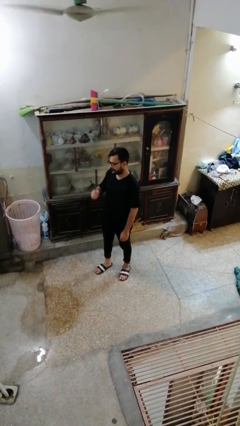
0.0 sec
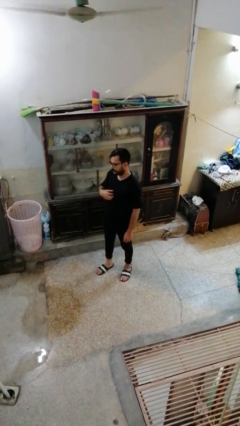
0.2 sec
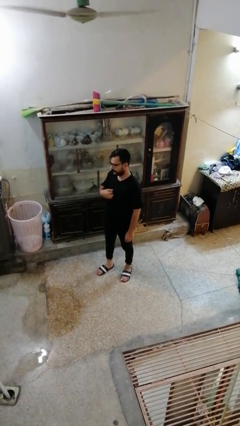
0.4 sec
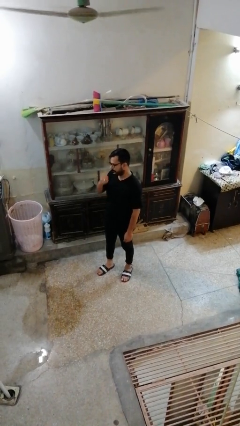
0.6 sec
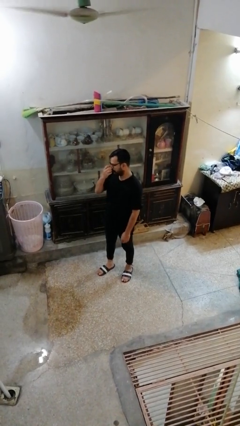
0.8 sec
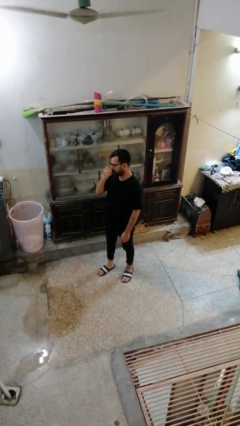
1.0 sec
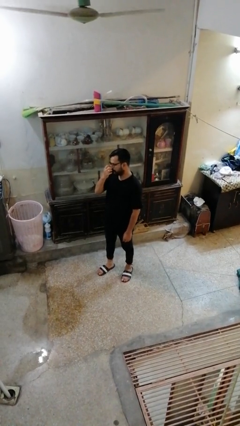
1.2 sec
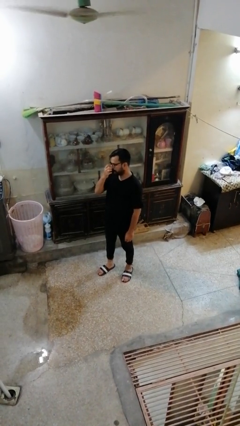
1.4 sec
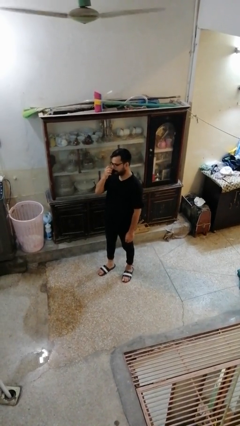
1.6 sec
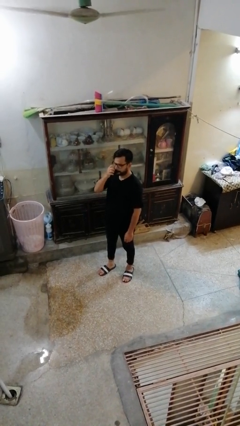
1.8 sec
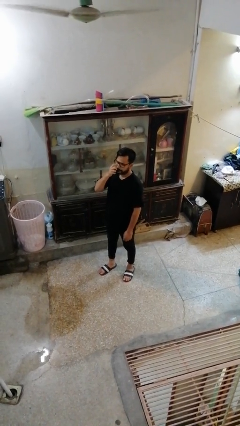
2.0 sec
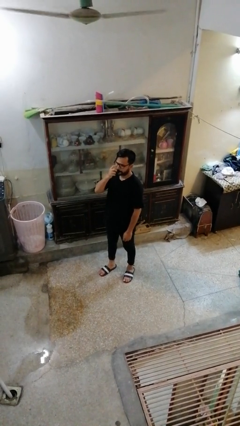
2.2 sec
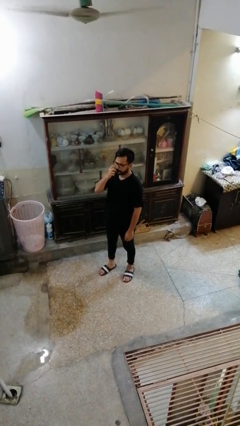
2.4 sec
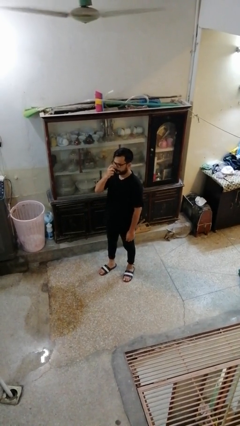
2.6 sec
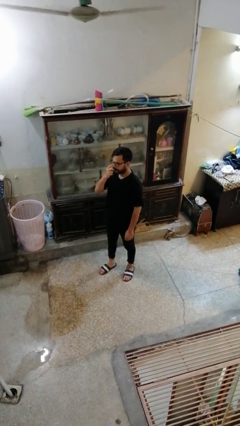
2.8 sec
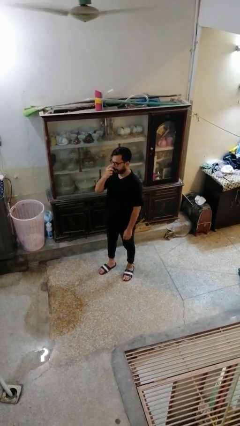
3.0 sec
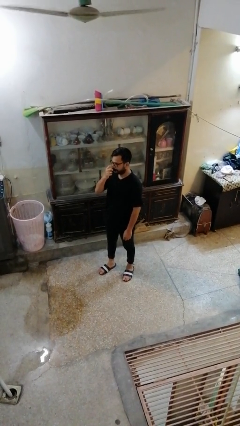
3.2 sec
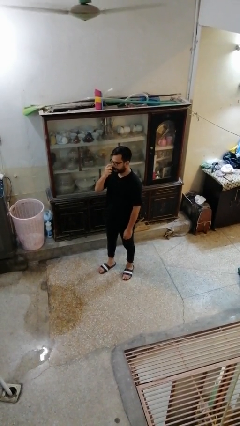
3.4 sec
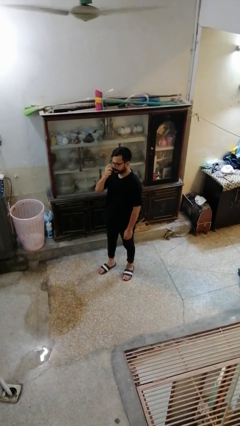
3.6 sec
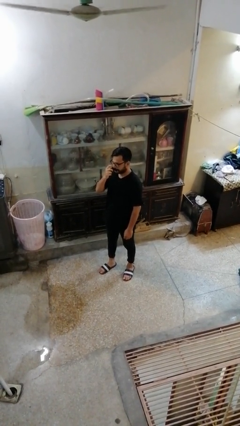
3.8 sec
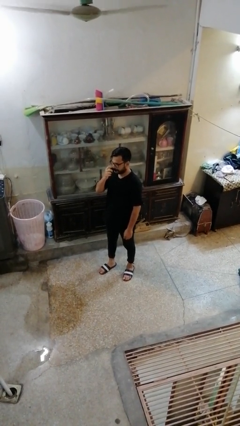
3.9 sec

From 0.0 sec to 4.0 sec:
person scratches face

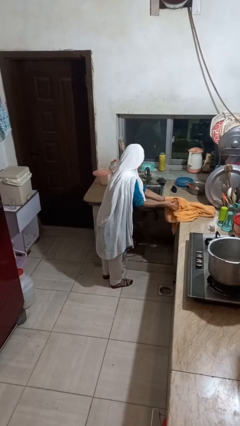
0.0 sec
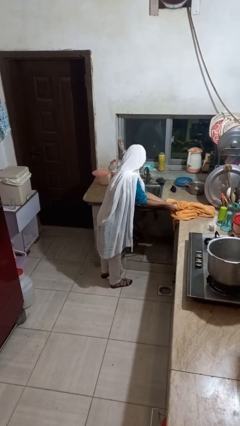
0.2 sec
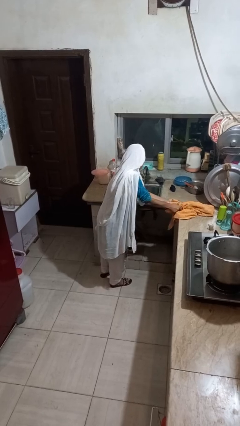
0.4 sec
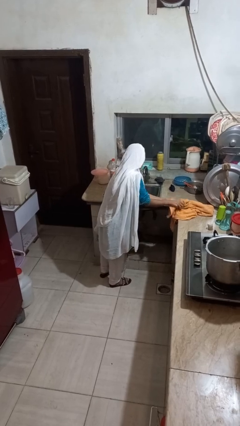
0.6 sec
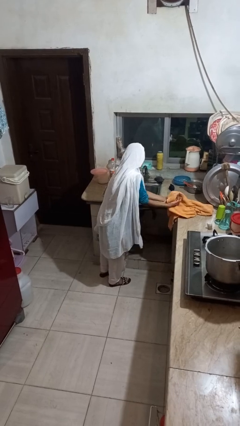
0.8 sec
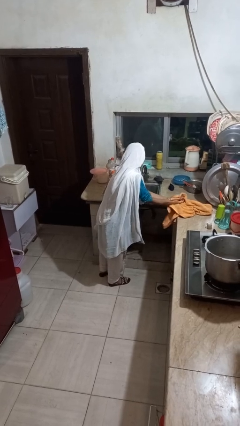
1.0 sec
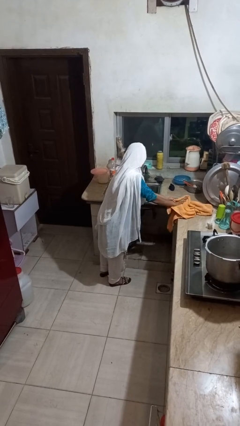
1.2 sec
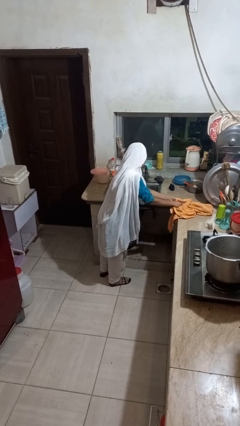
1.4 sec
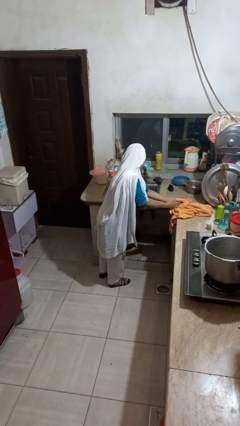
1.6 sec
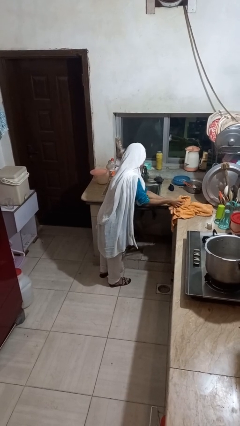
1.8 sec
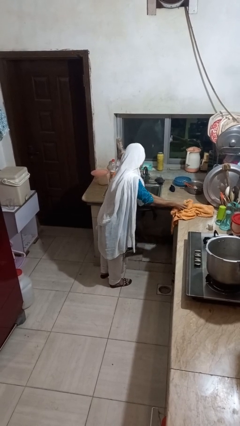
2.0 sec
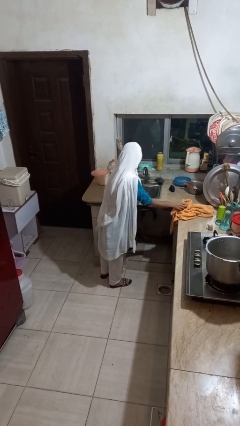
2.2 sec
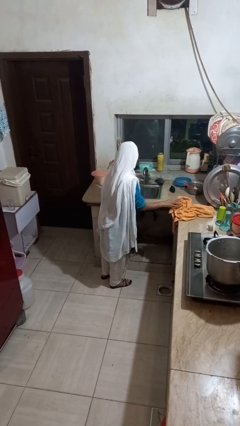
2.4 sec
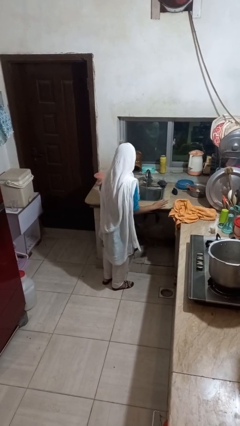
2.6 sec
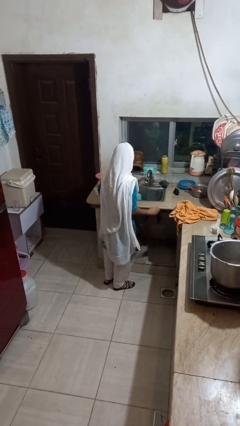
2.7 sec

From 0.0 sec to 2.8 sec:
person dries hands with towel

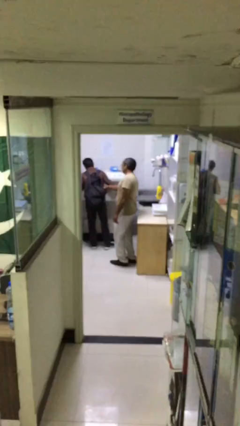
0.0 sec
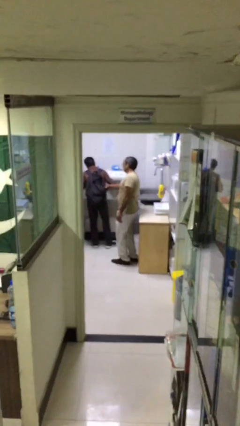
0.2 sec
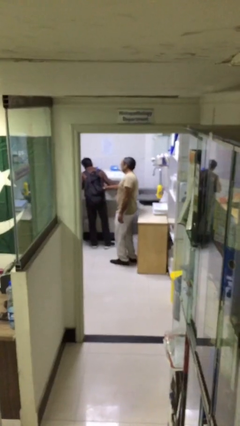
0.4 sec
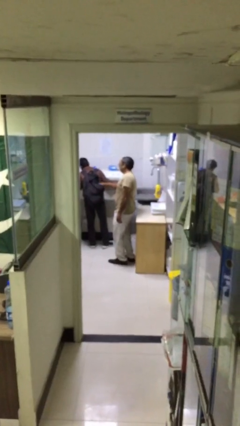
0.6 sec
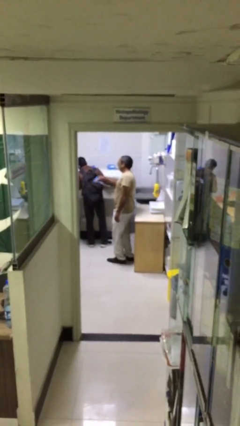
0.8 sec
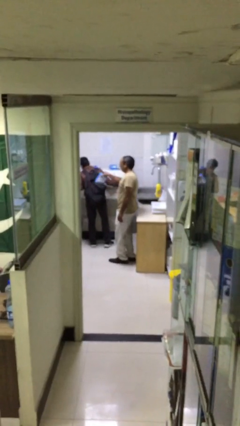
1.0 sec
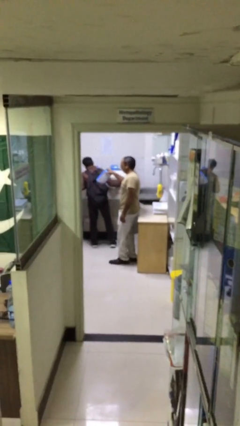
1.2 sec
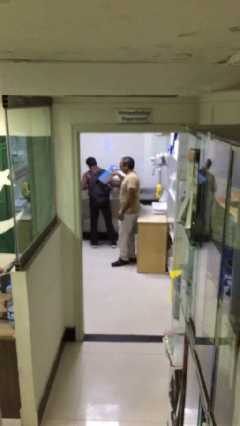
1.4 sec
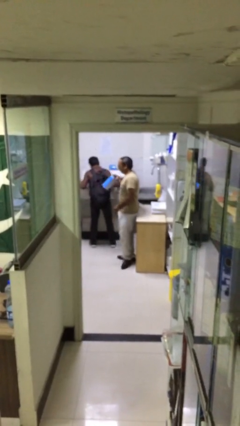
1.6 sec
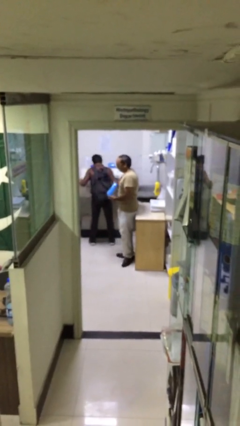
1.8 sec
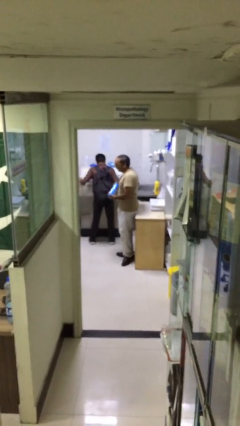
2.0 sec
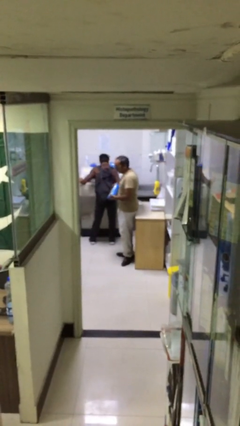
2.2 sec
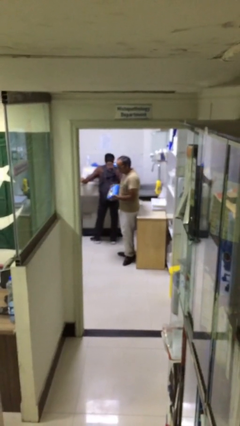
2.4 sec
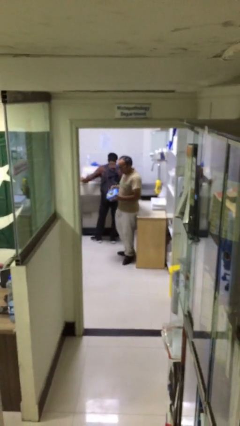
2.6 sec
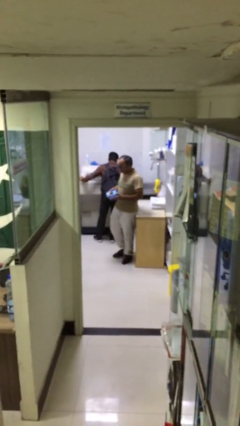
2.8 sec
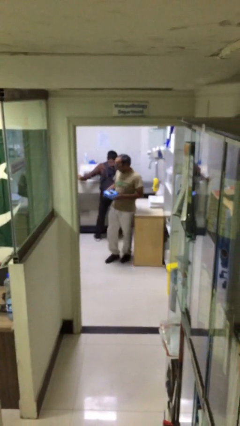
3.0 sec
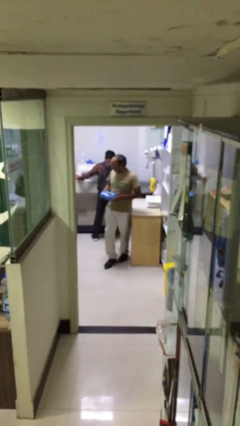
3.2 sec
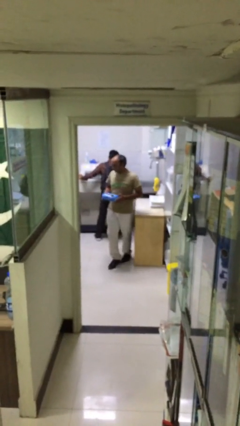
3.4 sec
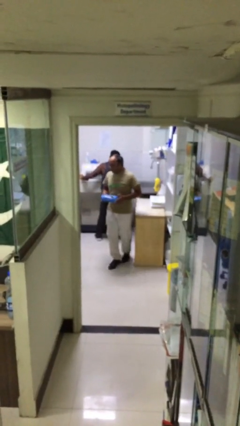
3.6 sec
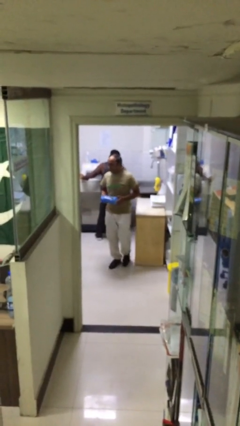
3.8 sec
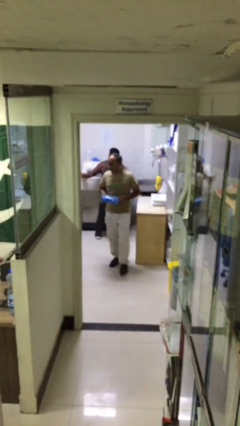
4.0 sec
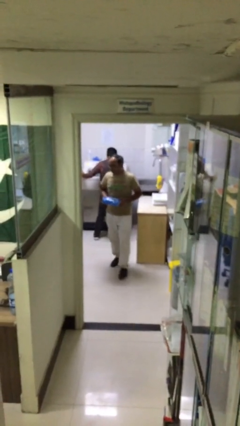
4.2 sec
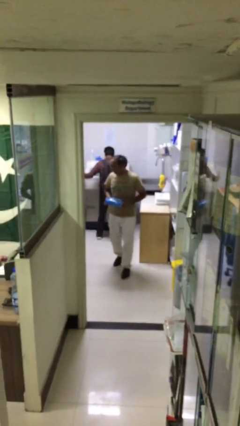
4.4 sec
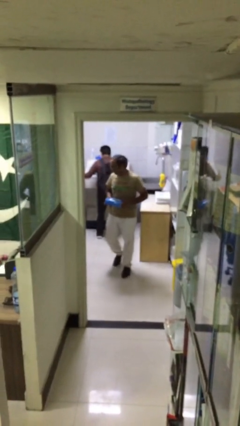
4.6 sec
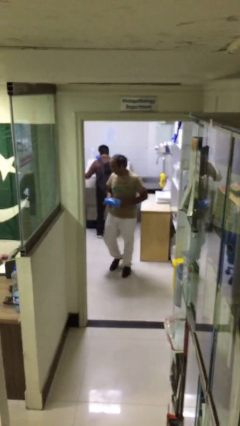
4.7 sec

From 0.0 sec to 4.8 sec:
person steals object from person

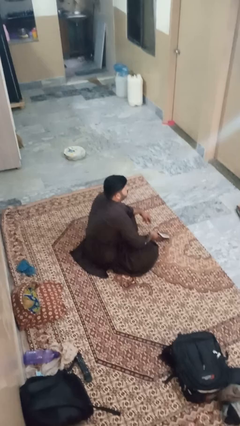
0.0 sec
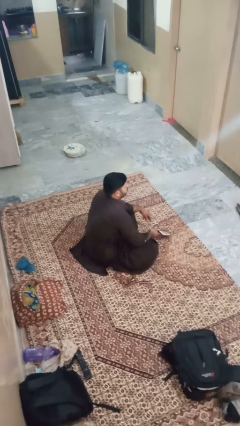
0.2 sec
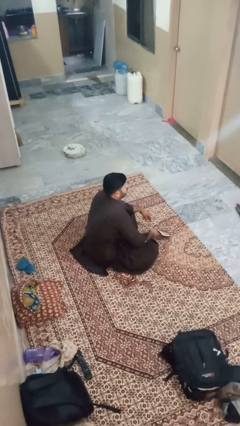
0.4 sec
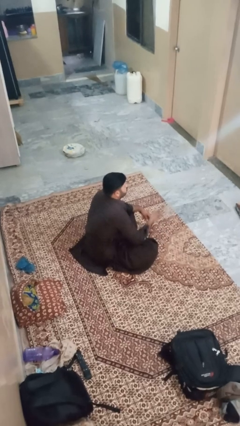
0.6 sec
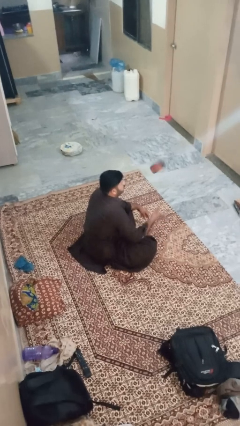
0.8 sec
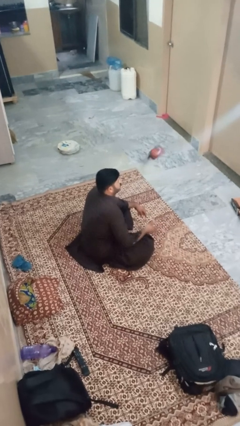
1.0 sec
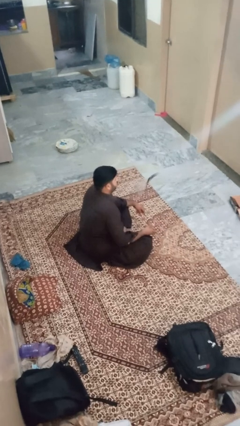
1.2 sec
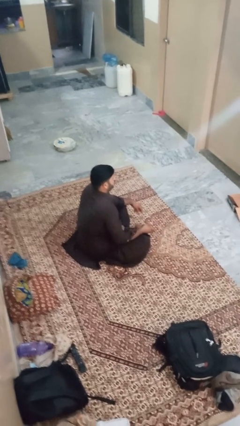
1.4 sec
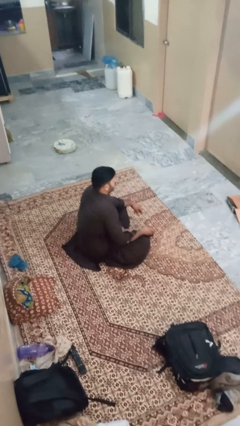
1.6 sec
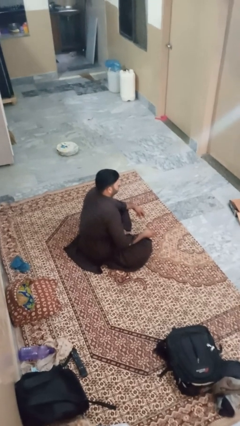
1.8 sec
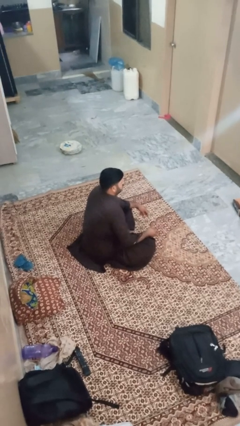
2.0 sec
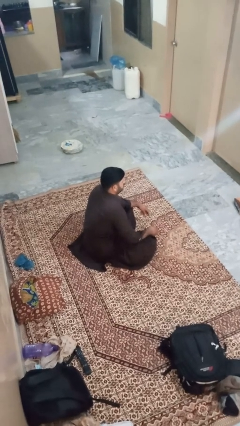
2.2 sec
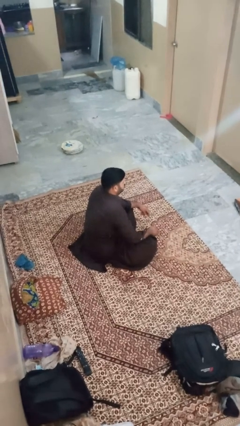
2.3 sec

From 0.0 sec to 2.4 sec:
person throws object into air

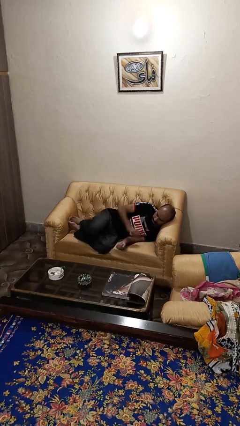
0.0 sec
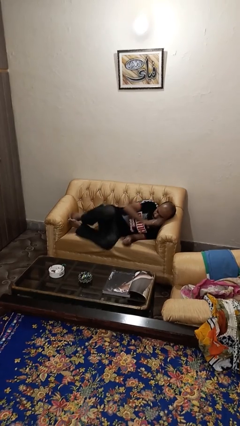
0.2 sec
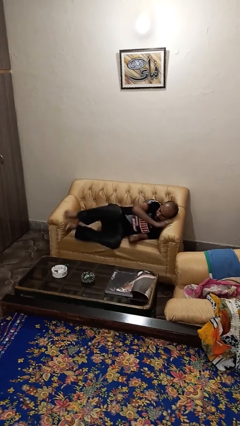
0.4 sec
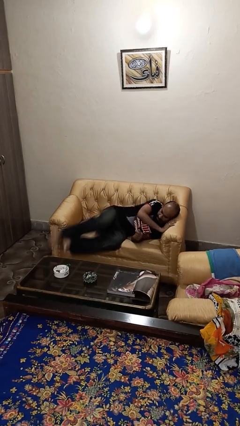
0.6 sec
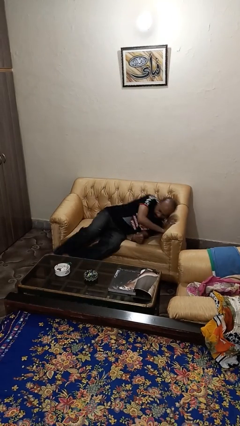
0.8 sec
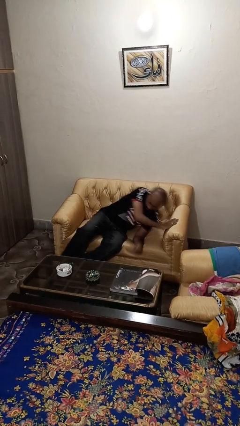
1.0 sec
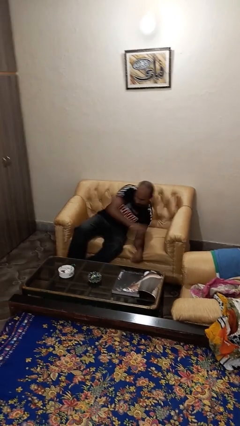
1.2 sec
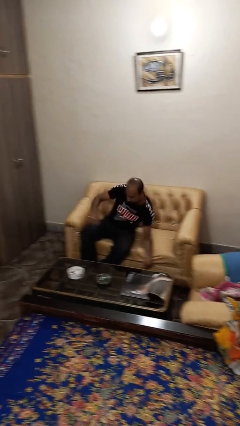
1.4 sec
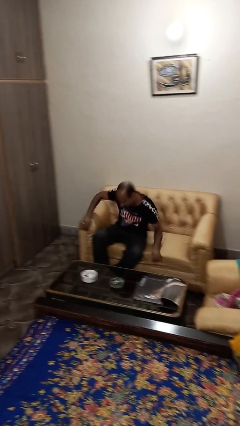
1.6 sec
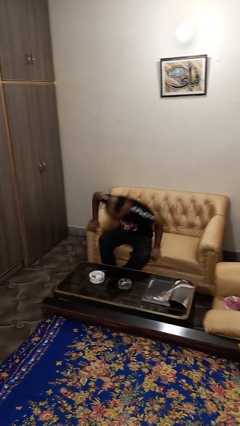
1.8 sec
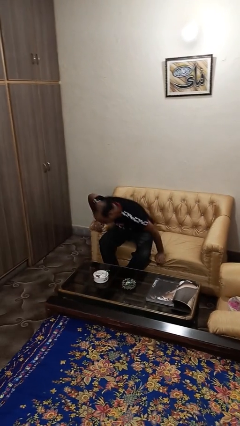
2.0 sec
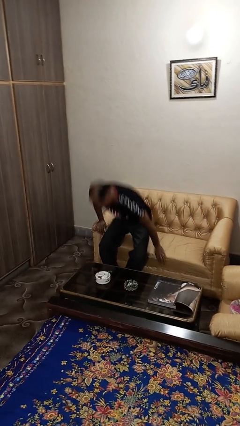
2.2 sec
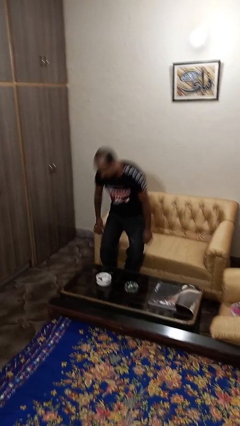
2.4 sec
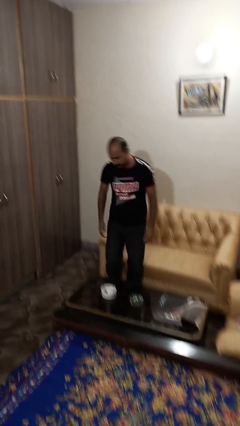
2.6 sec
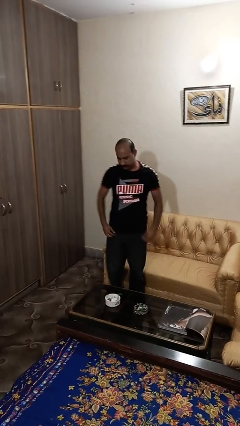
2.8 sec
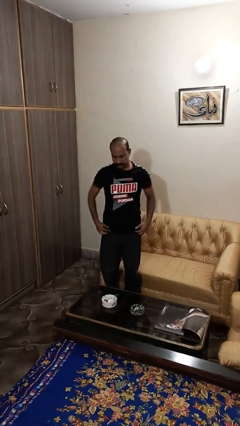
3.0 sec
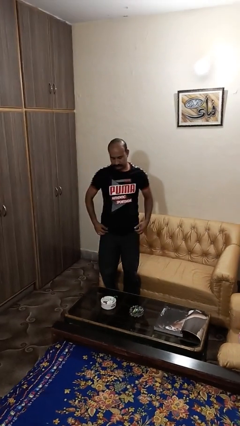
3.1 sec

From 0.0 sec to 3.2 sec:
person stands up
